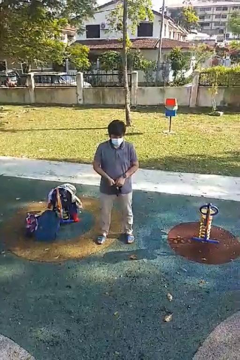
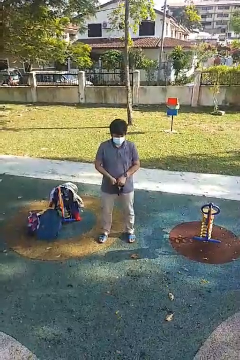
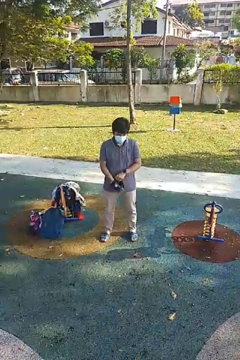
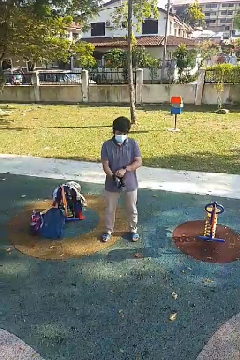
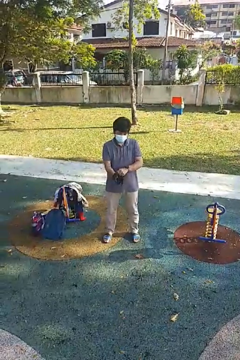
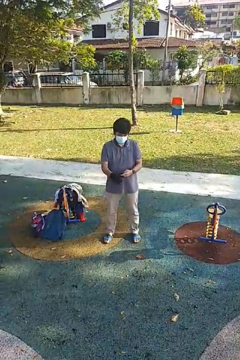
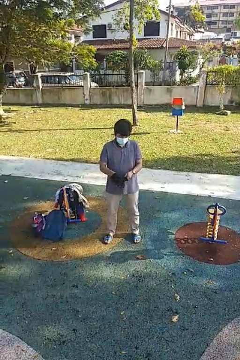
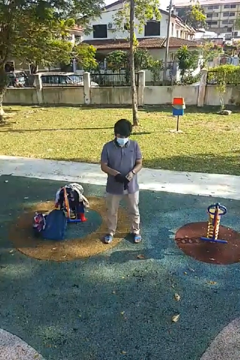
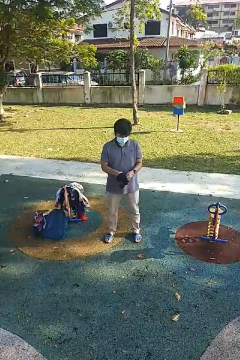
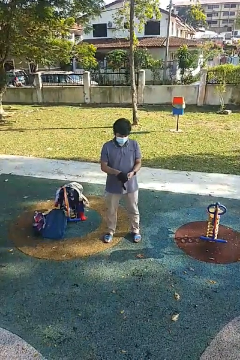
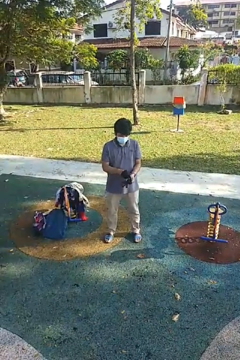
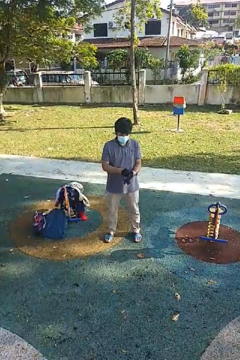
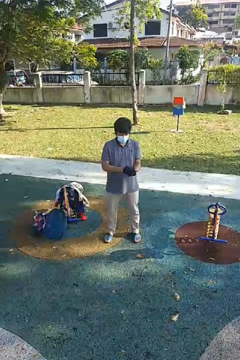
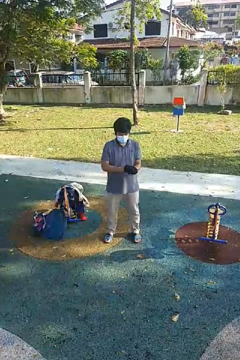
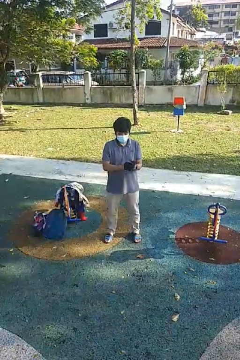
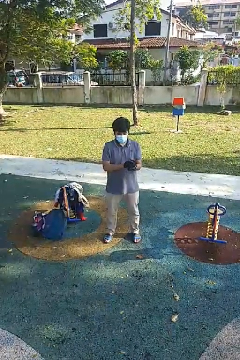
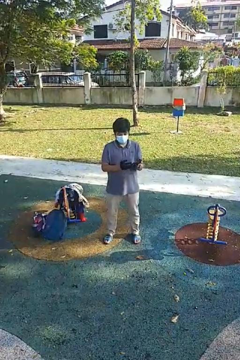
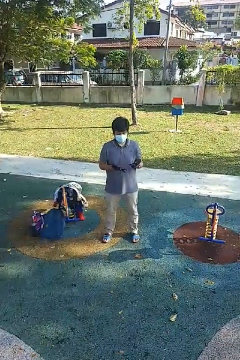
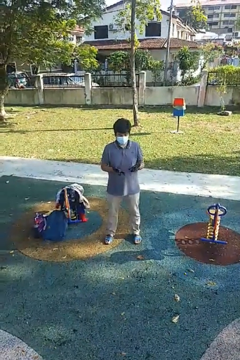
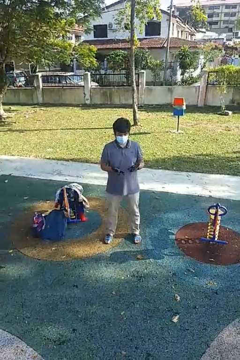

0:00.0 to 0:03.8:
person puts on gloves

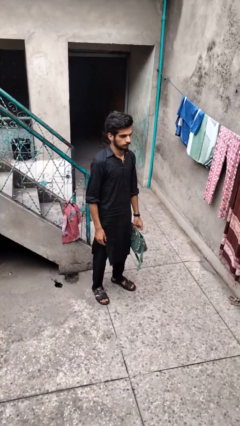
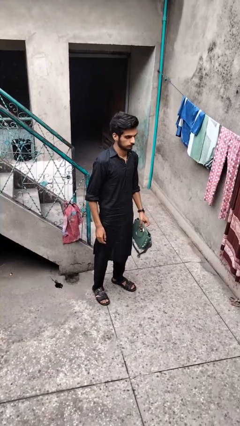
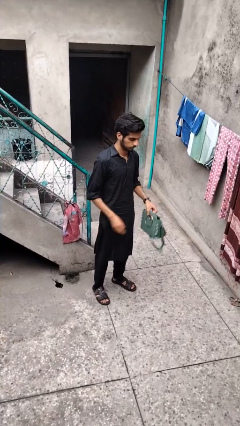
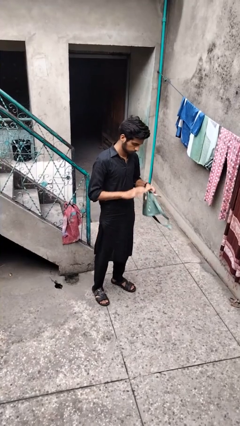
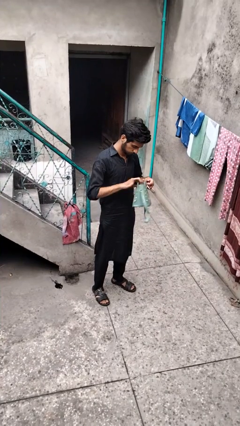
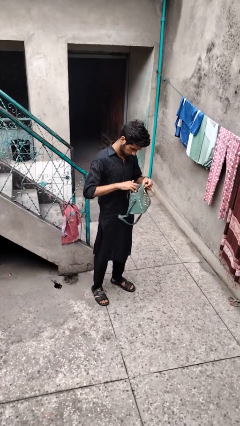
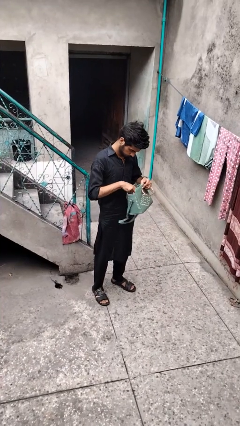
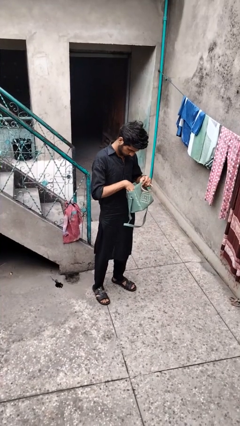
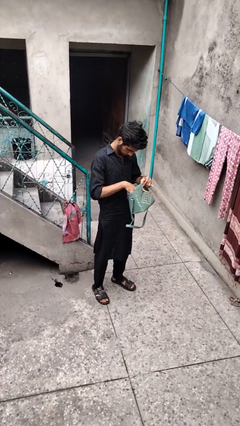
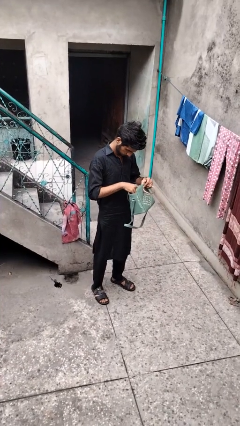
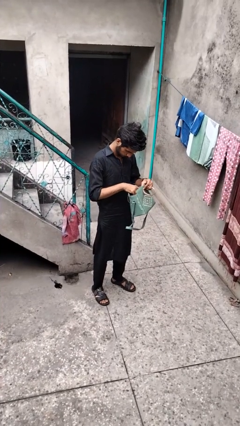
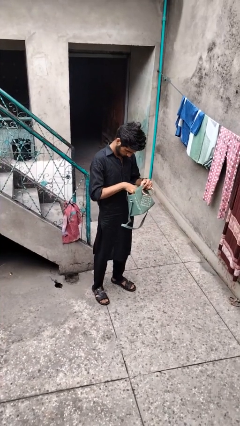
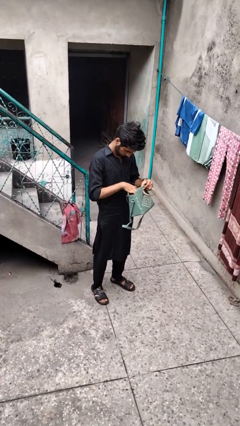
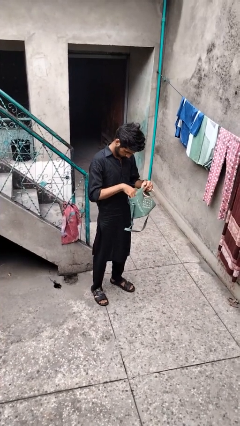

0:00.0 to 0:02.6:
person searches in purse

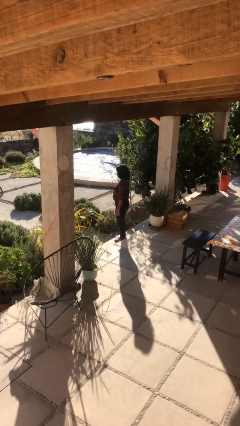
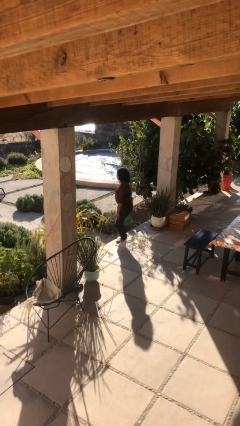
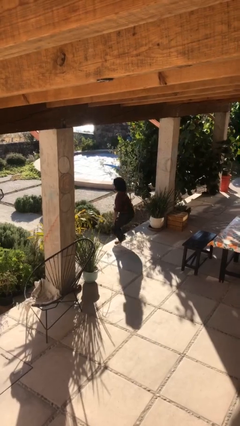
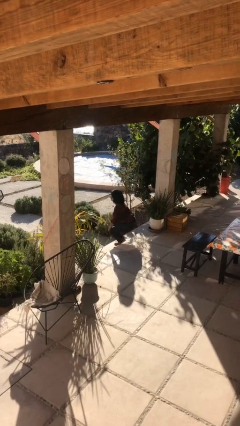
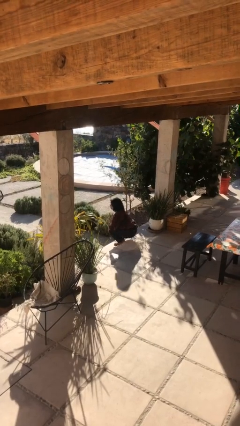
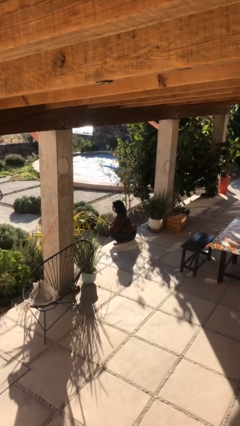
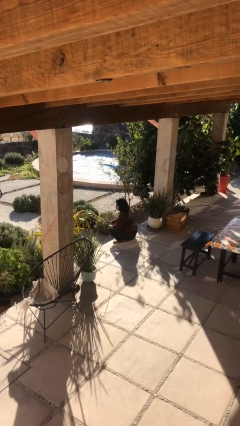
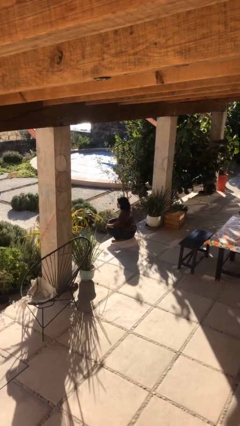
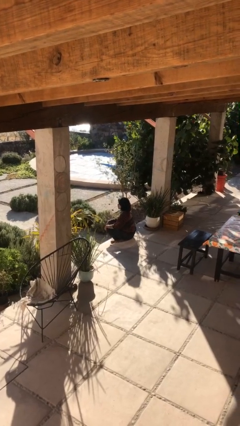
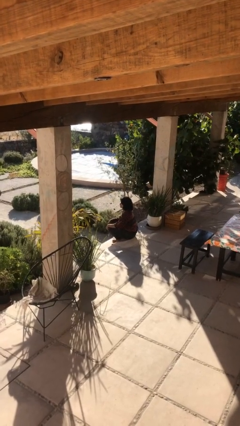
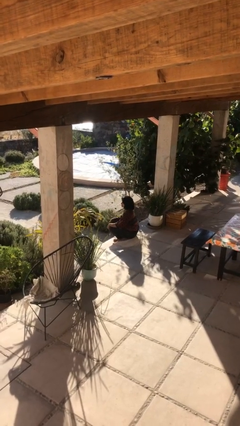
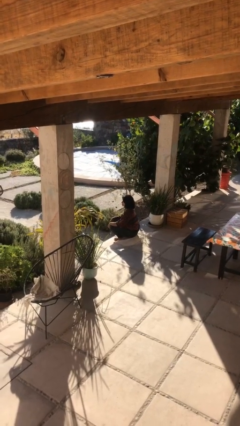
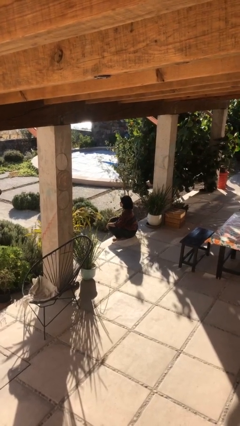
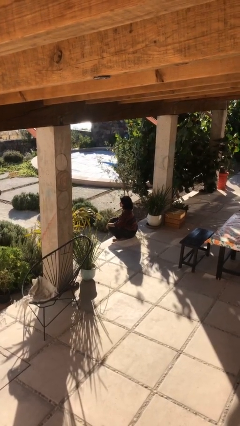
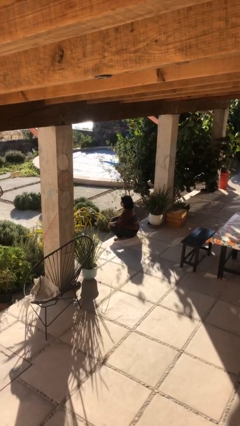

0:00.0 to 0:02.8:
person sits down

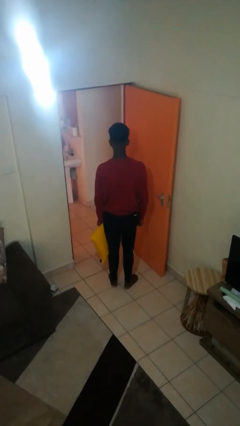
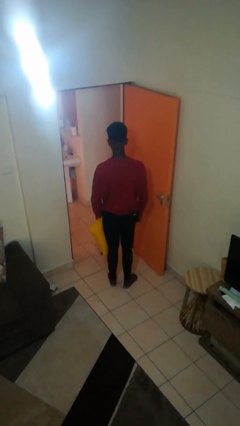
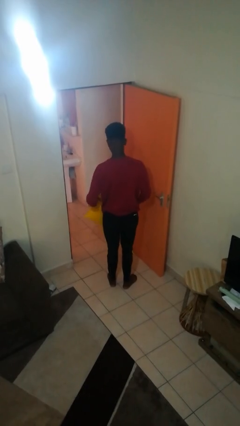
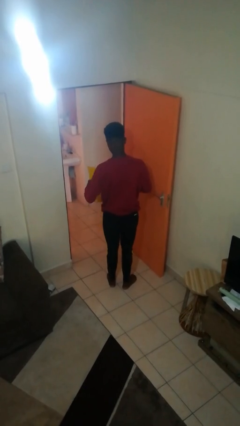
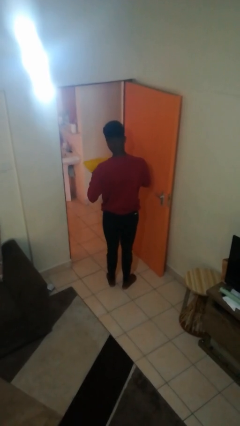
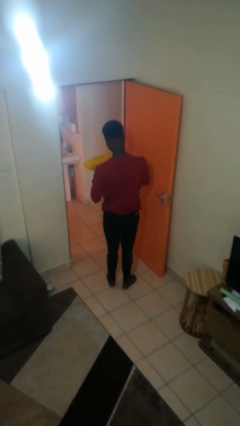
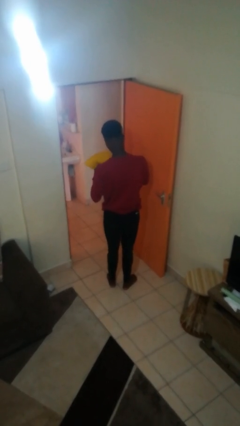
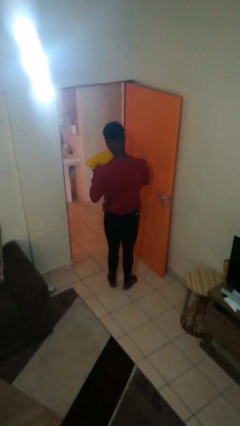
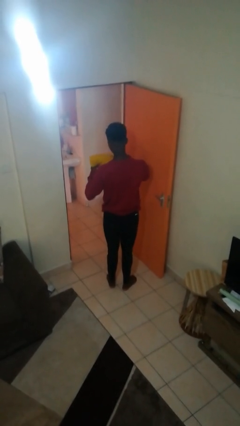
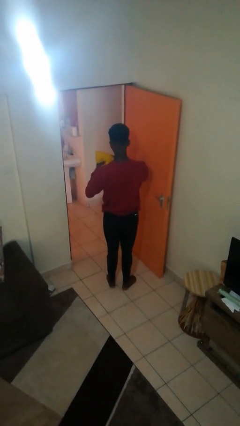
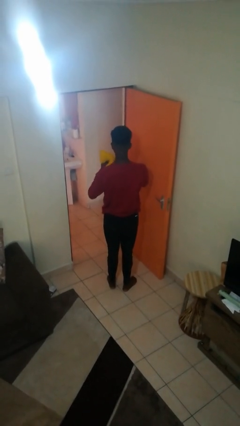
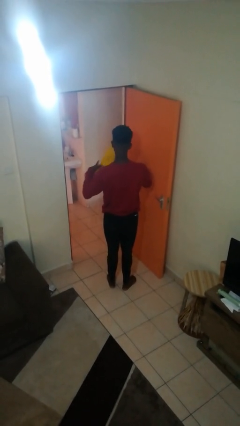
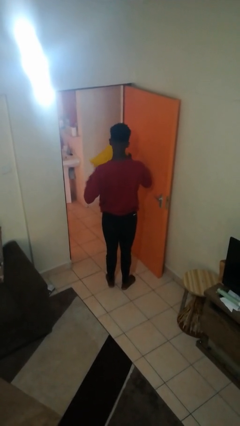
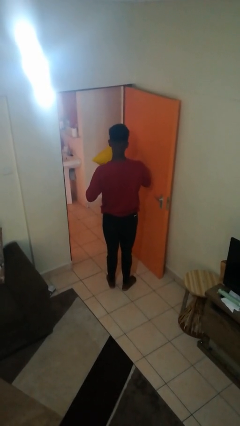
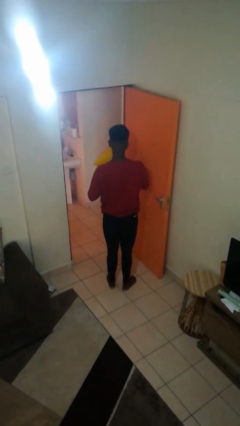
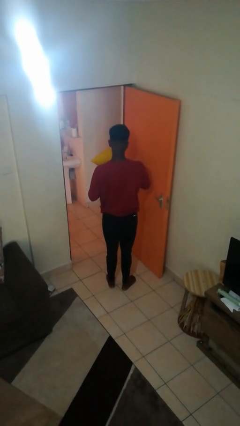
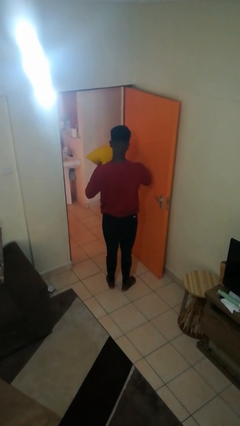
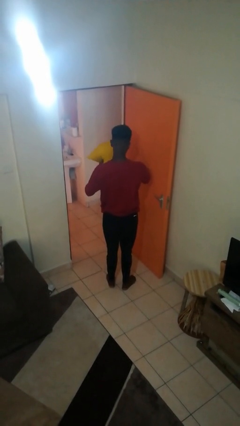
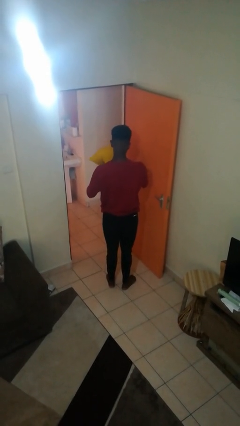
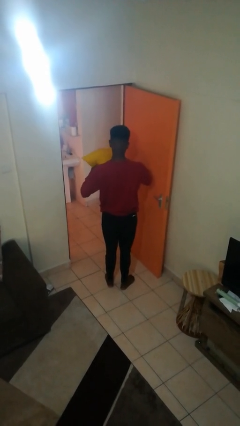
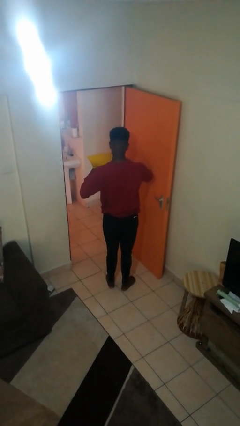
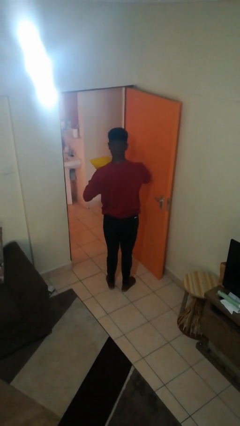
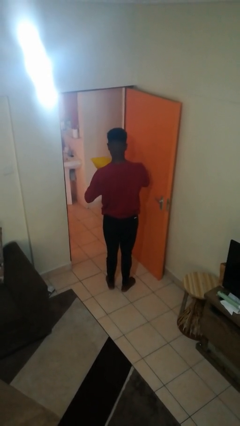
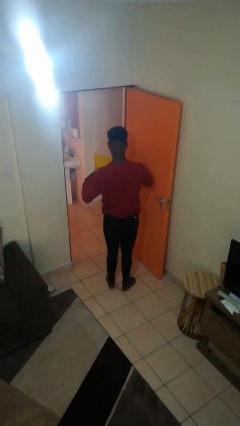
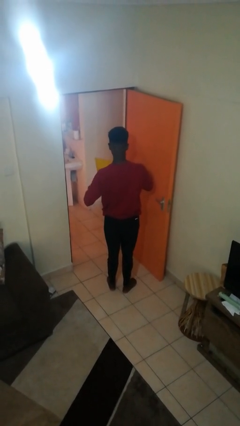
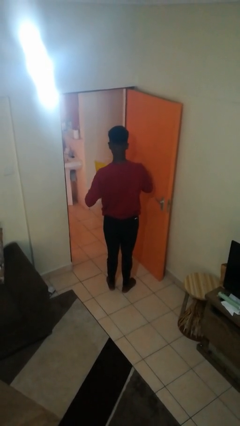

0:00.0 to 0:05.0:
person squeezes object

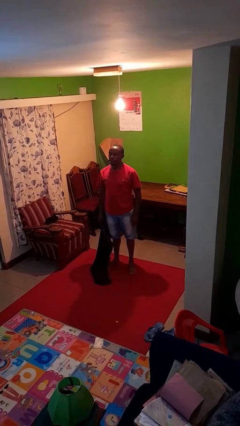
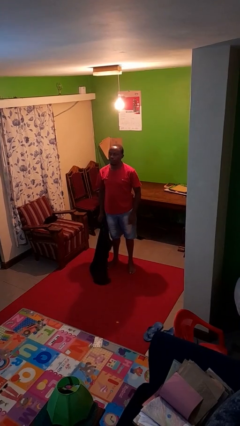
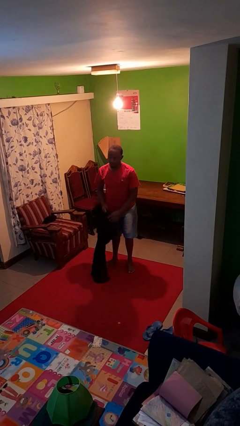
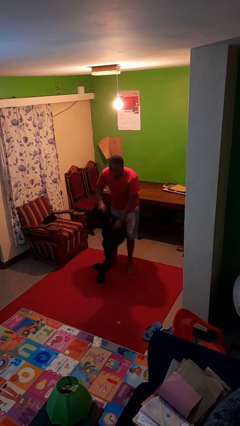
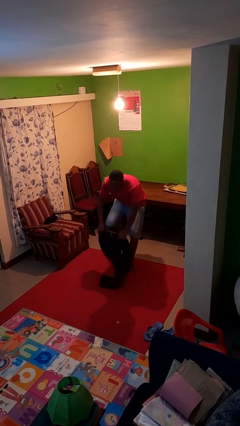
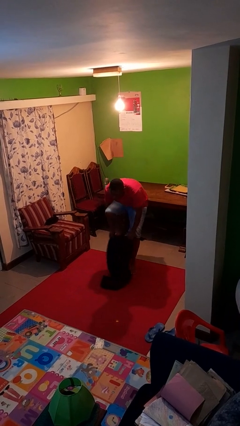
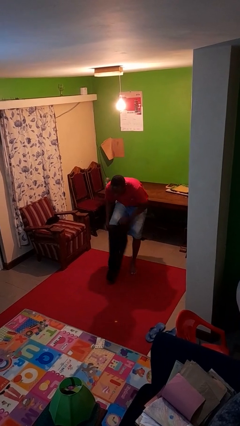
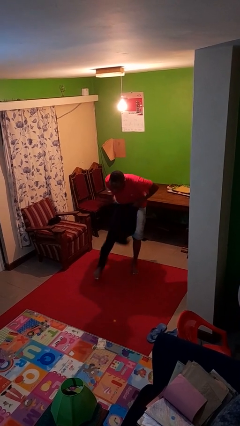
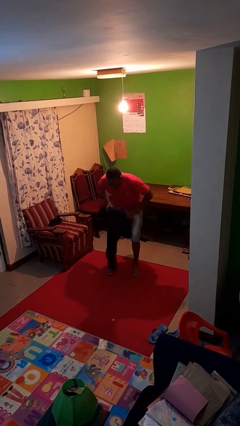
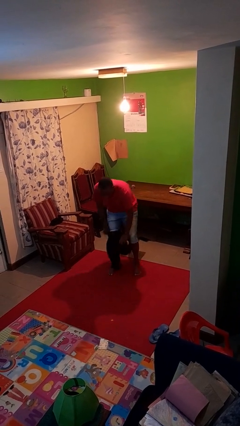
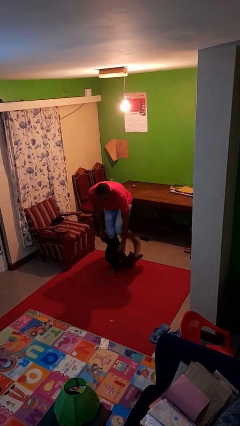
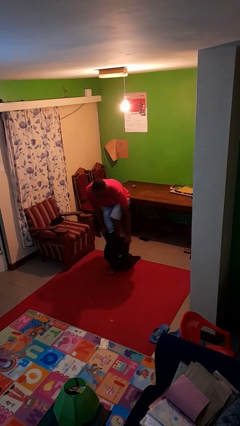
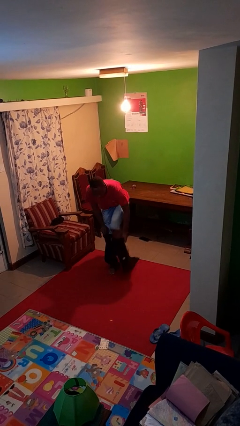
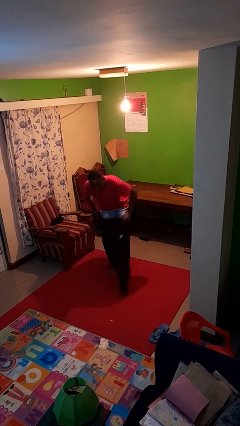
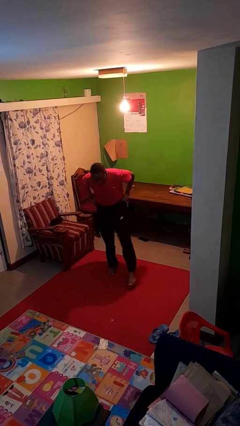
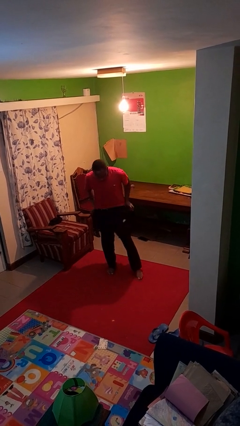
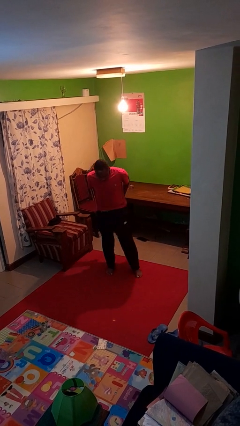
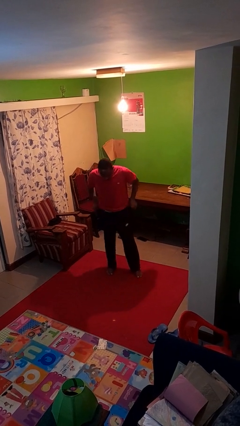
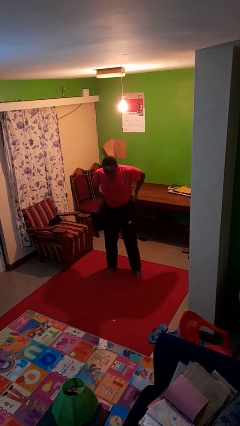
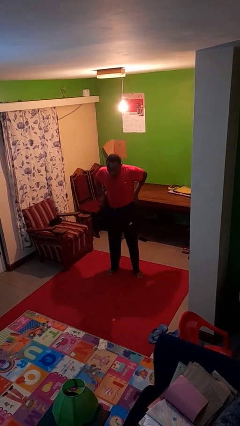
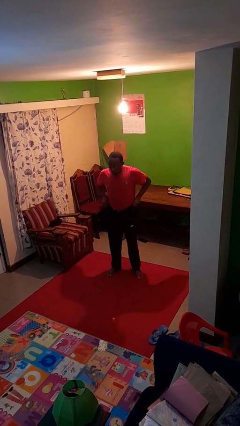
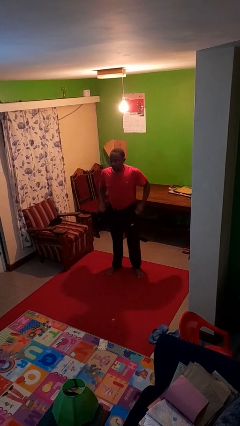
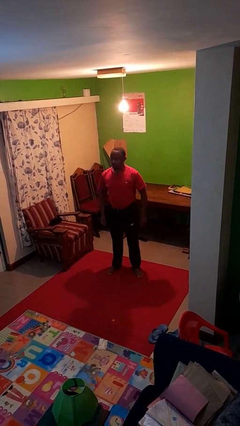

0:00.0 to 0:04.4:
person puts on pants
